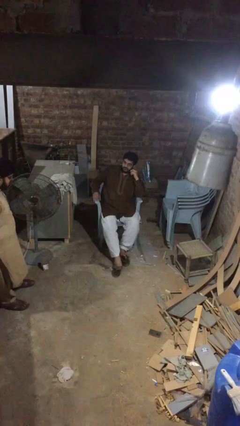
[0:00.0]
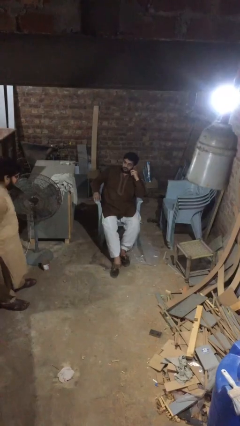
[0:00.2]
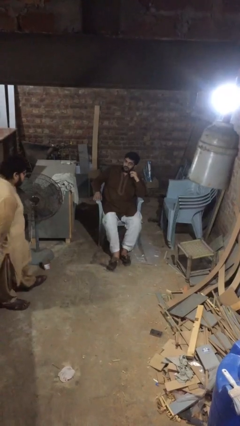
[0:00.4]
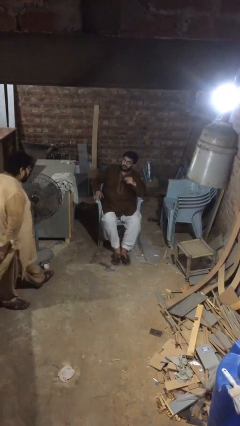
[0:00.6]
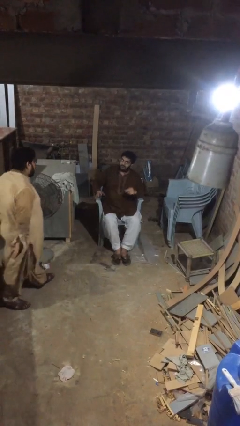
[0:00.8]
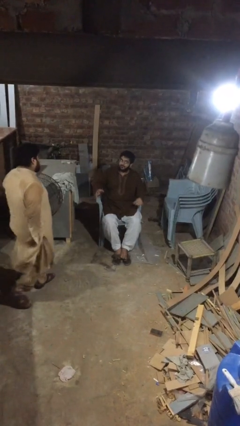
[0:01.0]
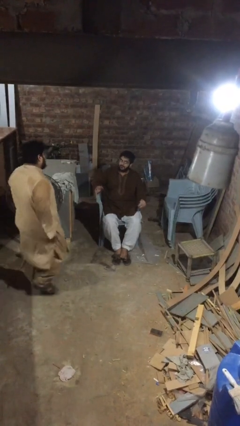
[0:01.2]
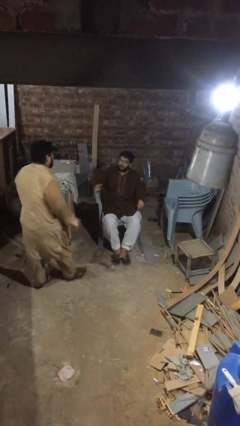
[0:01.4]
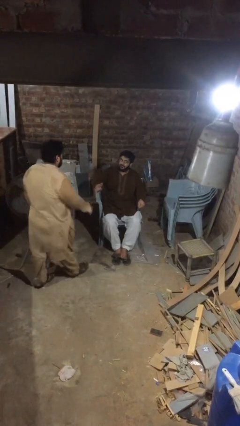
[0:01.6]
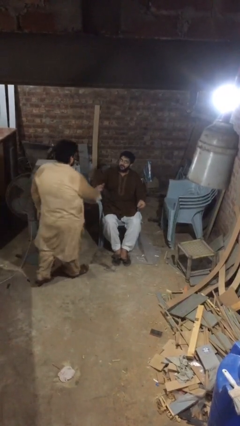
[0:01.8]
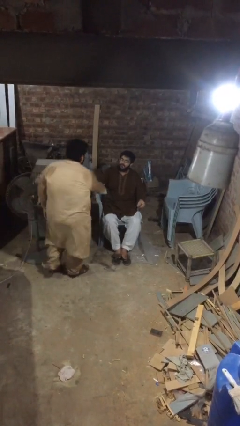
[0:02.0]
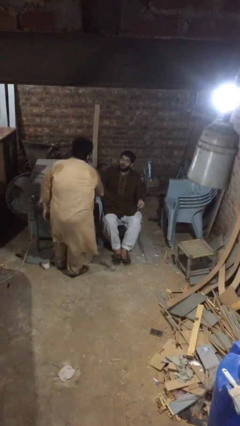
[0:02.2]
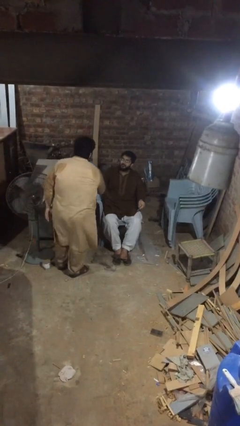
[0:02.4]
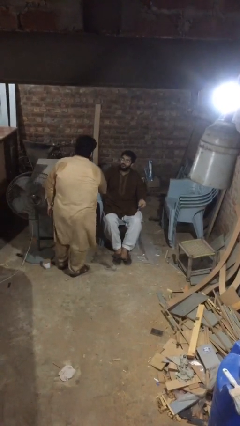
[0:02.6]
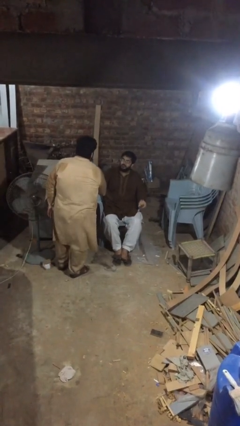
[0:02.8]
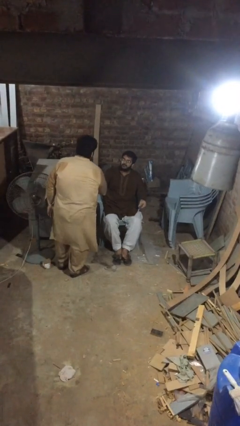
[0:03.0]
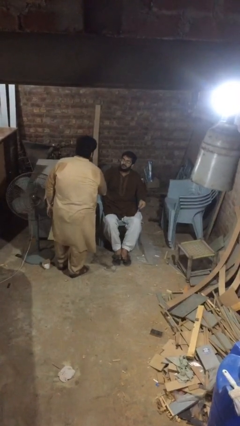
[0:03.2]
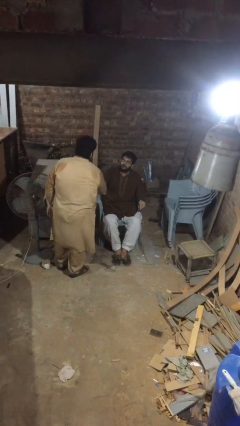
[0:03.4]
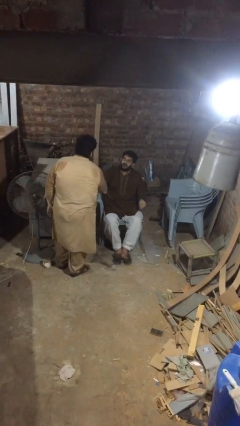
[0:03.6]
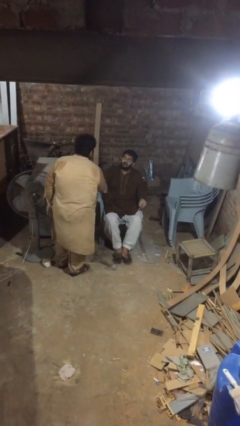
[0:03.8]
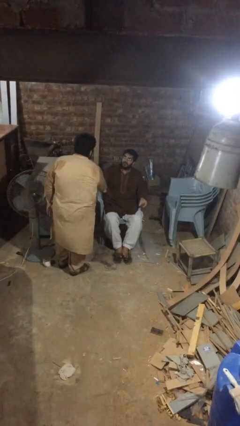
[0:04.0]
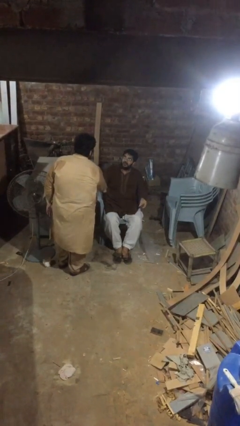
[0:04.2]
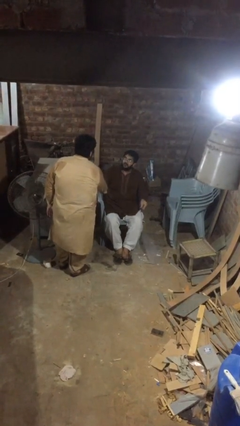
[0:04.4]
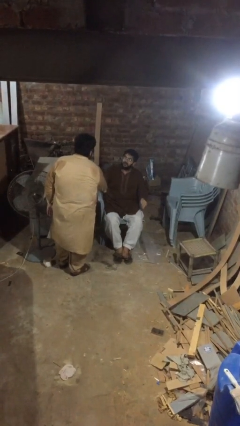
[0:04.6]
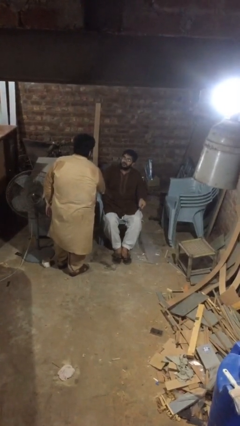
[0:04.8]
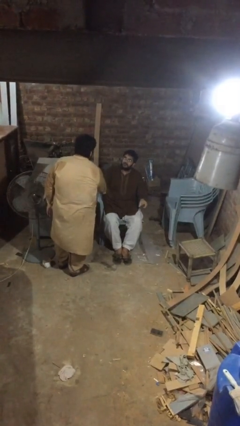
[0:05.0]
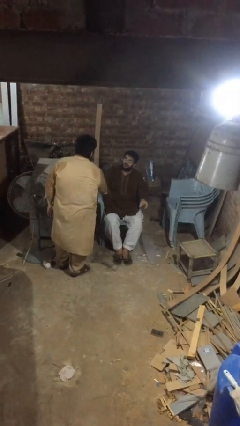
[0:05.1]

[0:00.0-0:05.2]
person shakes hand

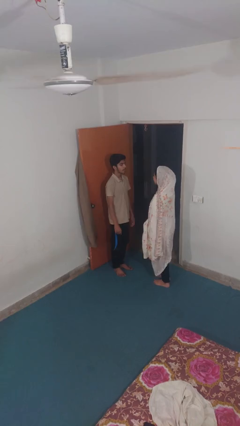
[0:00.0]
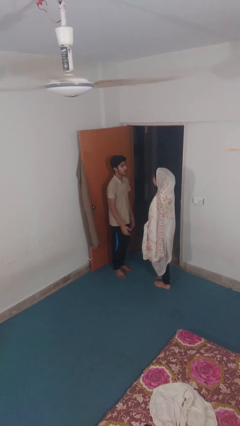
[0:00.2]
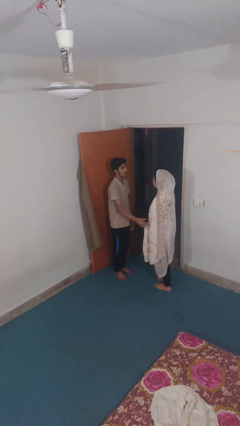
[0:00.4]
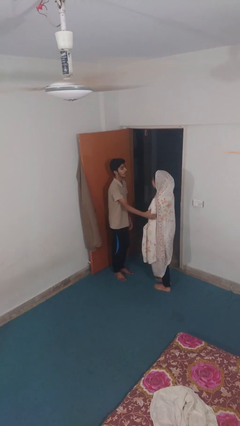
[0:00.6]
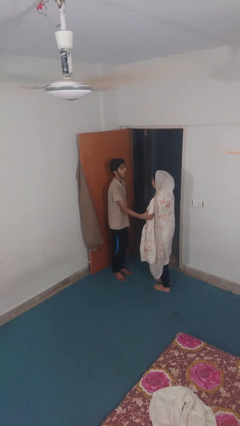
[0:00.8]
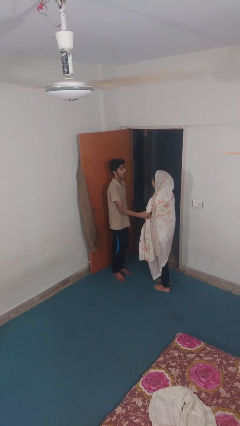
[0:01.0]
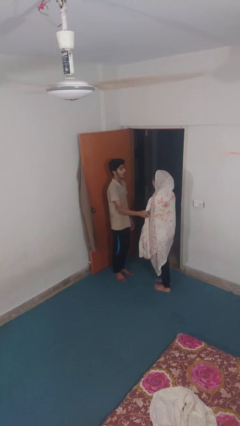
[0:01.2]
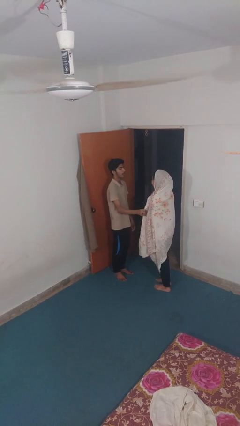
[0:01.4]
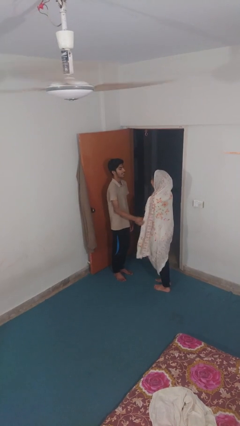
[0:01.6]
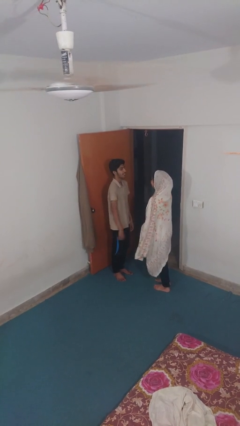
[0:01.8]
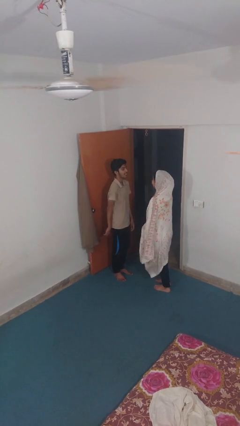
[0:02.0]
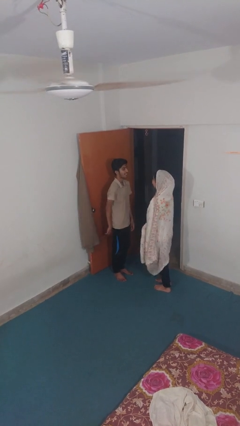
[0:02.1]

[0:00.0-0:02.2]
person grabs person by bicep

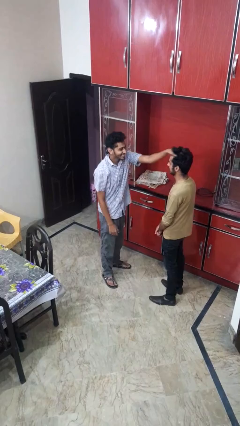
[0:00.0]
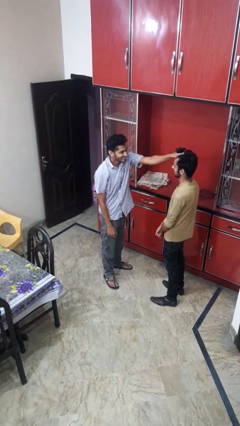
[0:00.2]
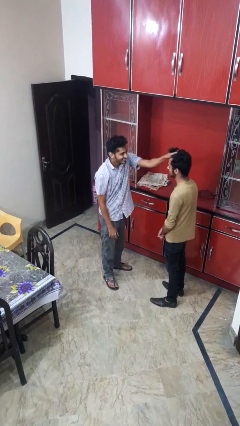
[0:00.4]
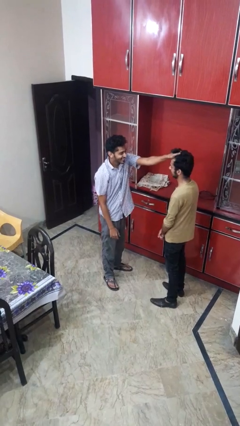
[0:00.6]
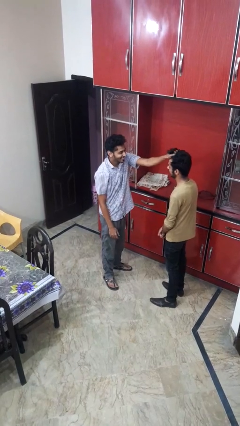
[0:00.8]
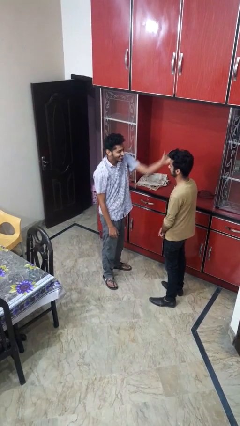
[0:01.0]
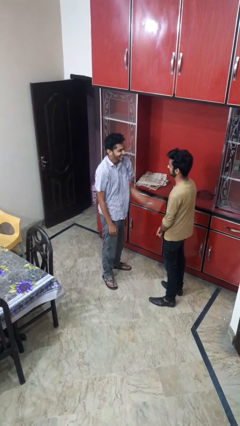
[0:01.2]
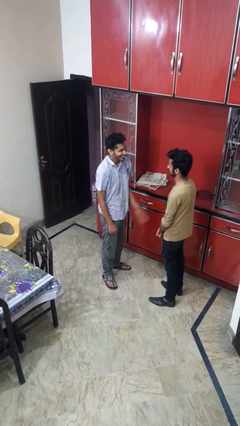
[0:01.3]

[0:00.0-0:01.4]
person grabs person by hair

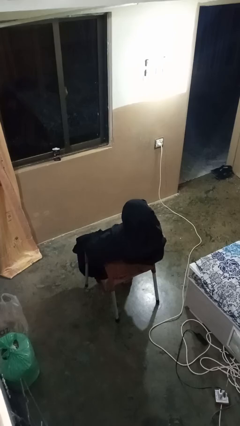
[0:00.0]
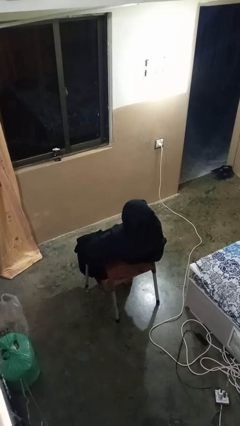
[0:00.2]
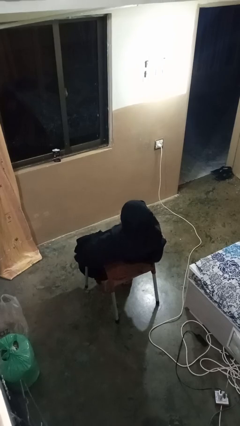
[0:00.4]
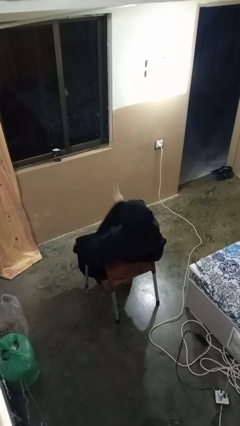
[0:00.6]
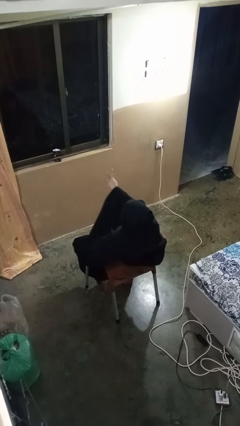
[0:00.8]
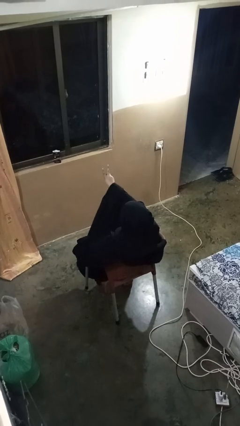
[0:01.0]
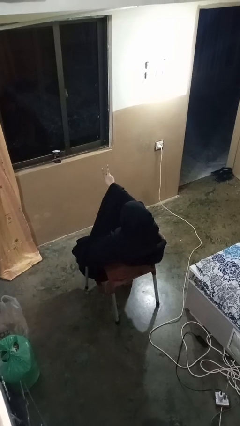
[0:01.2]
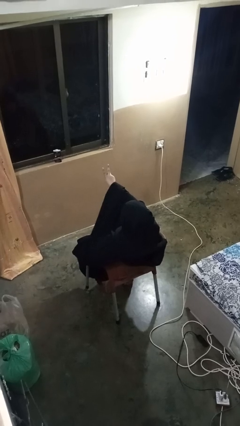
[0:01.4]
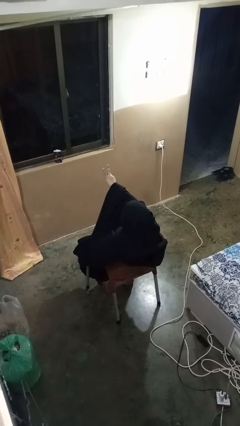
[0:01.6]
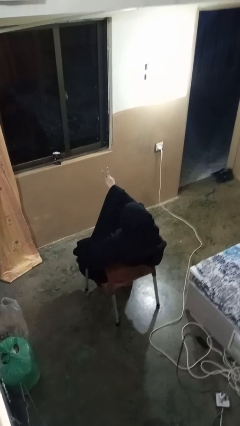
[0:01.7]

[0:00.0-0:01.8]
person gestures peace

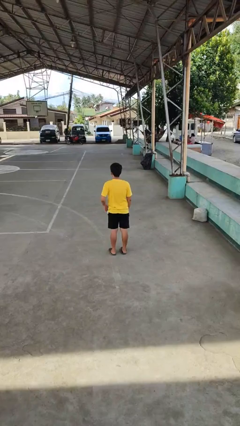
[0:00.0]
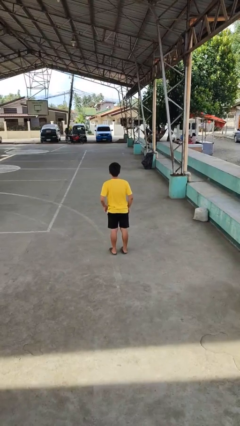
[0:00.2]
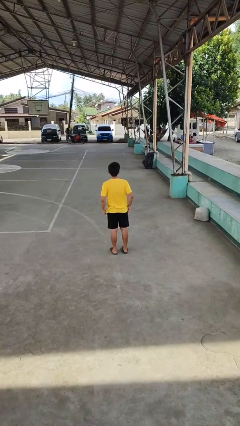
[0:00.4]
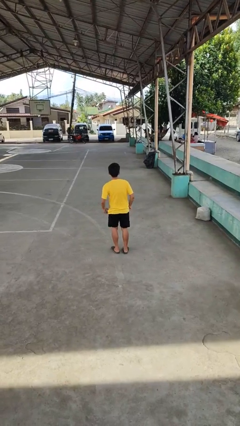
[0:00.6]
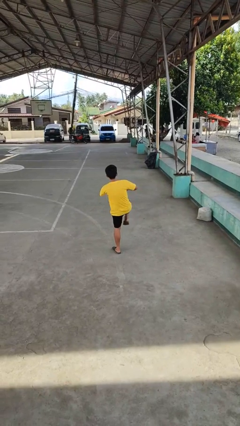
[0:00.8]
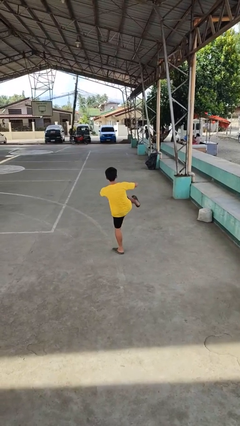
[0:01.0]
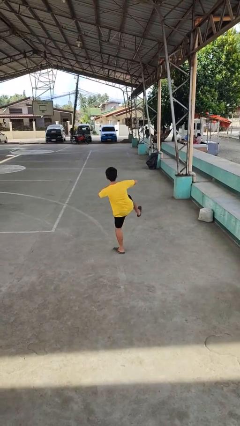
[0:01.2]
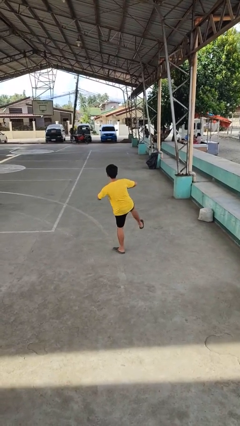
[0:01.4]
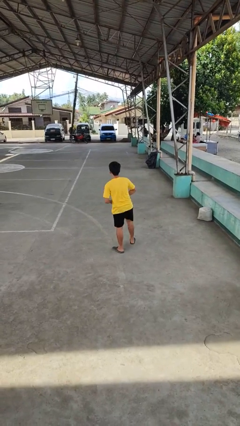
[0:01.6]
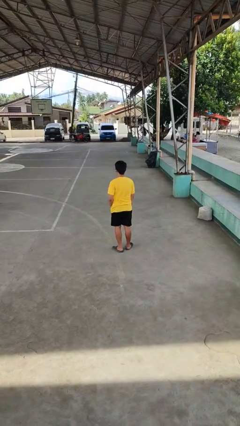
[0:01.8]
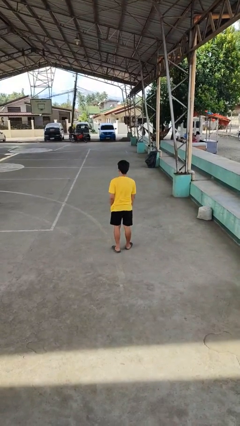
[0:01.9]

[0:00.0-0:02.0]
person karate kicks

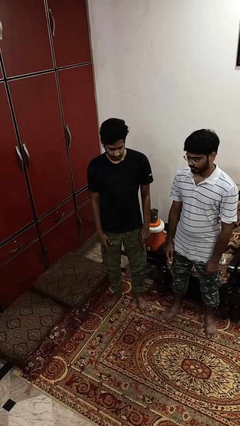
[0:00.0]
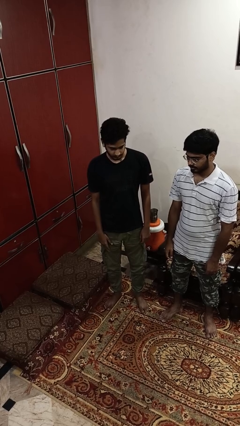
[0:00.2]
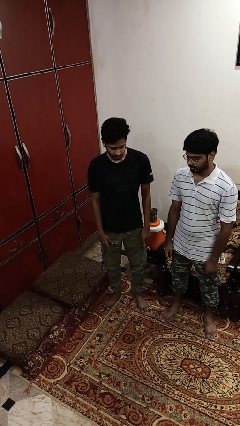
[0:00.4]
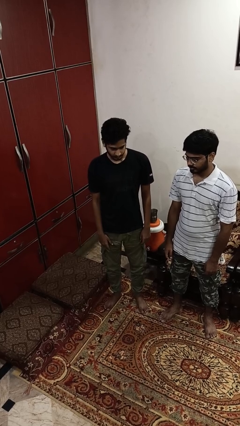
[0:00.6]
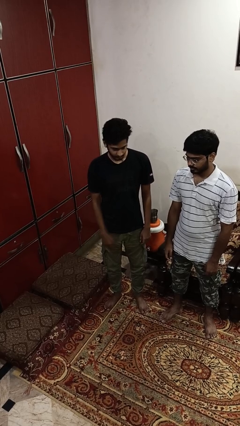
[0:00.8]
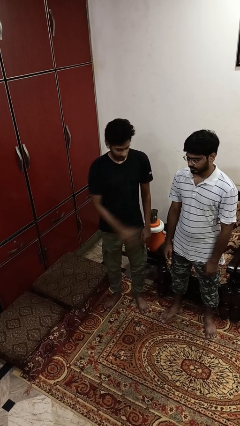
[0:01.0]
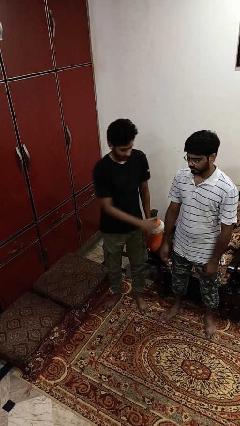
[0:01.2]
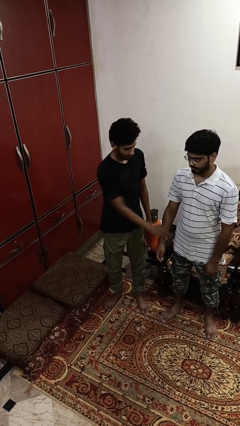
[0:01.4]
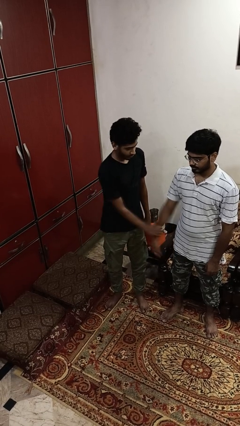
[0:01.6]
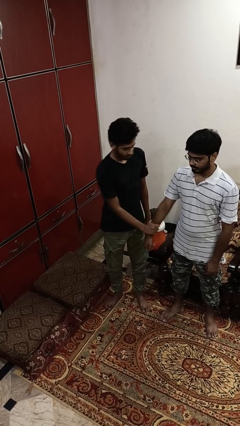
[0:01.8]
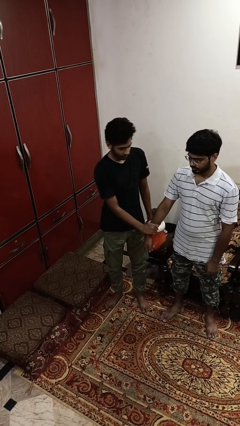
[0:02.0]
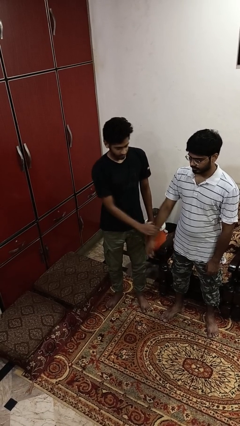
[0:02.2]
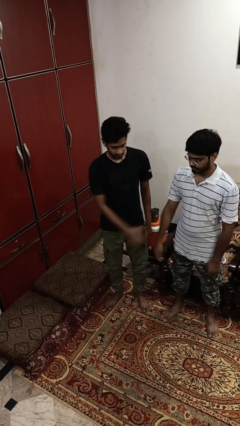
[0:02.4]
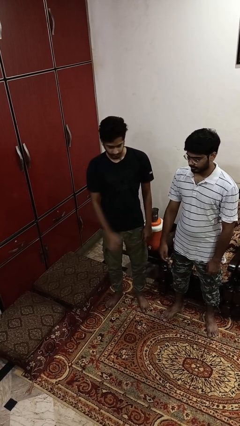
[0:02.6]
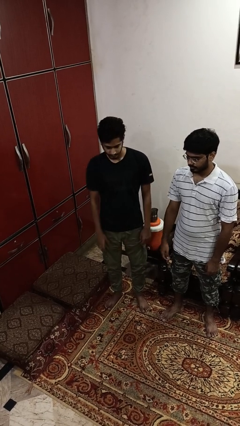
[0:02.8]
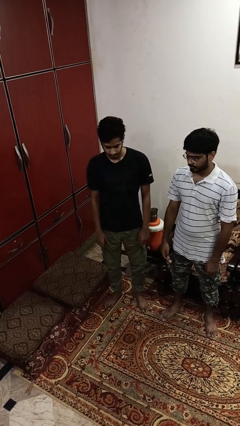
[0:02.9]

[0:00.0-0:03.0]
person grabs person by forearm

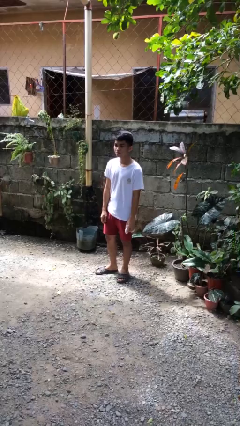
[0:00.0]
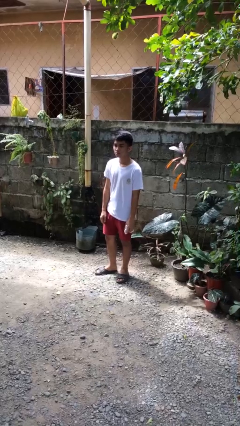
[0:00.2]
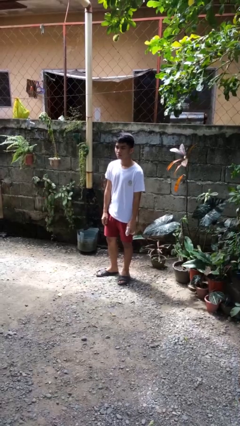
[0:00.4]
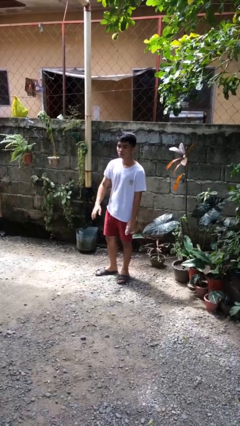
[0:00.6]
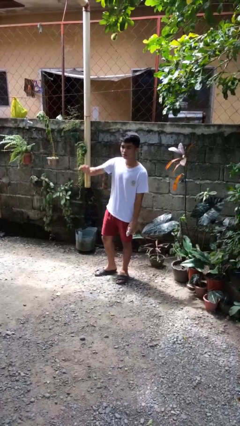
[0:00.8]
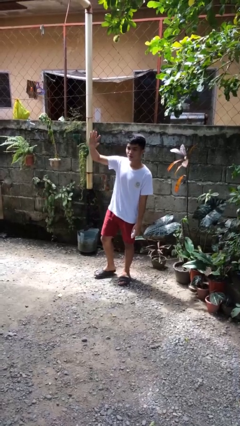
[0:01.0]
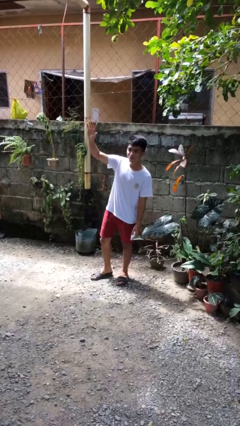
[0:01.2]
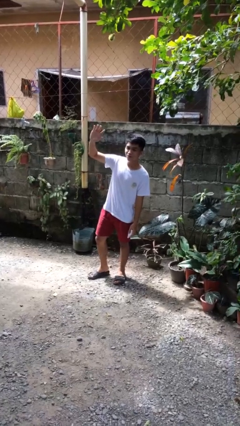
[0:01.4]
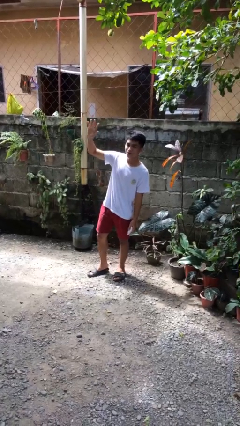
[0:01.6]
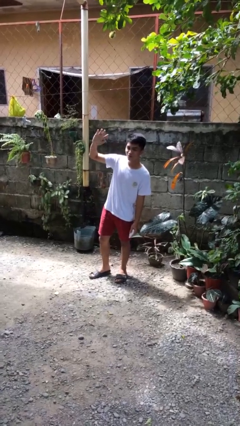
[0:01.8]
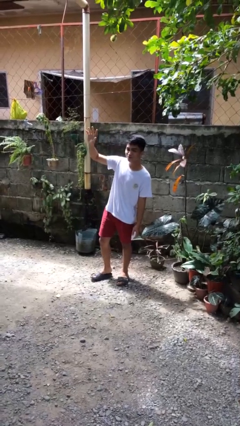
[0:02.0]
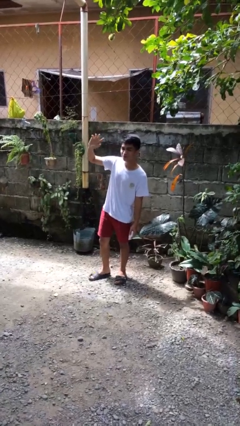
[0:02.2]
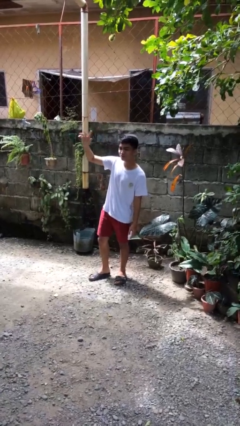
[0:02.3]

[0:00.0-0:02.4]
person waves at person
